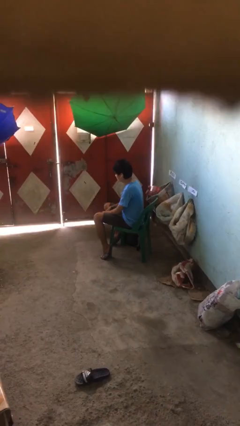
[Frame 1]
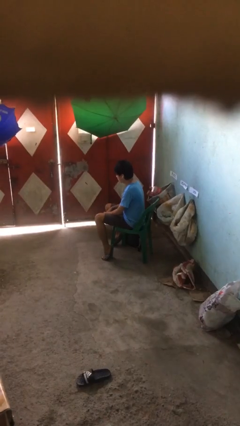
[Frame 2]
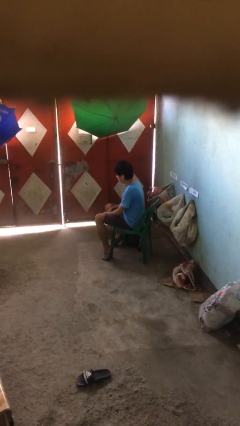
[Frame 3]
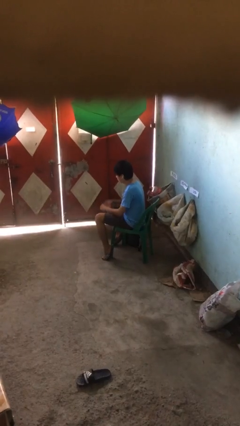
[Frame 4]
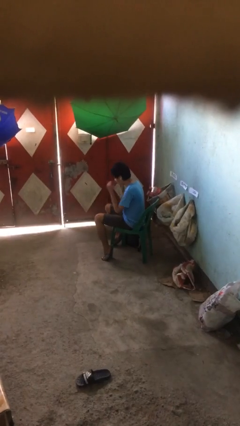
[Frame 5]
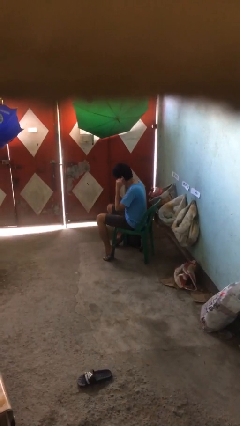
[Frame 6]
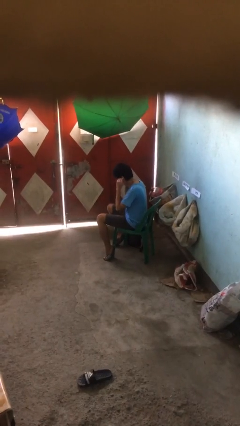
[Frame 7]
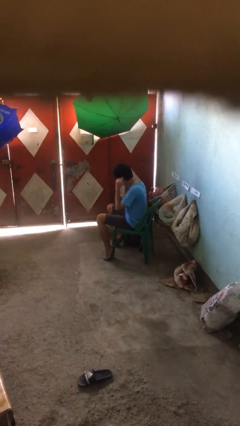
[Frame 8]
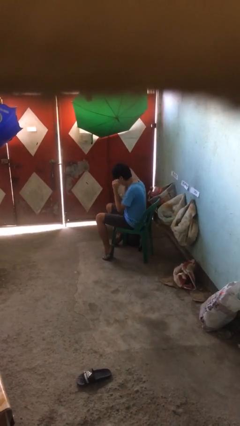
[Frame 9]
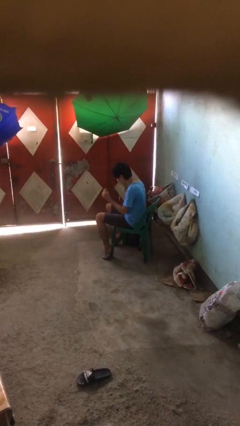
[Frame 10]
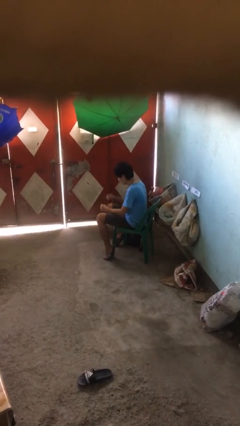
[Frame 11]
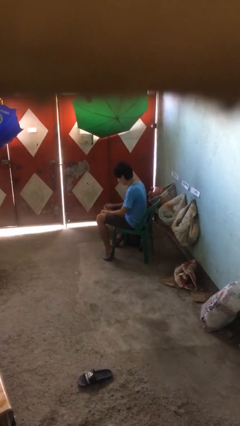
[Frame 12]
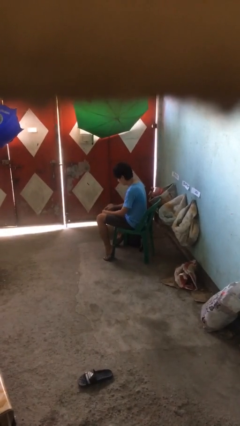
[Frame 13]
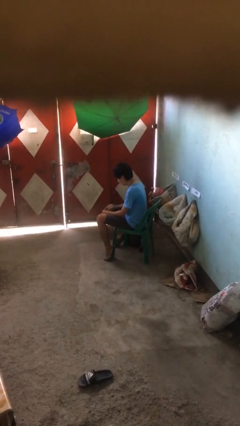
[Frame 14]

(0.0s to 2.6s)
person takes off headphones

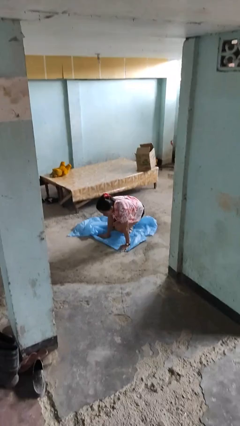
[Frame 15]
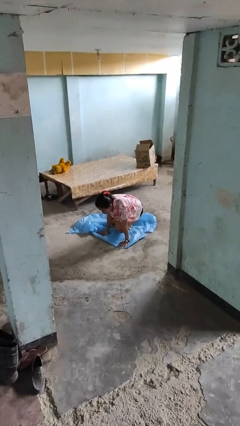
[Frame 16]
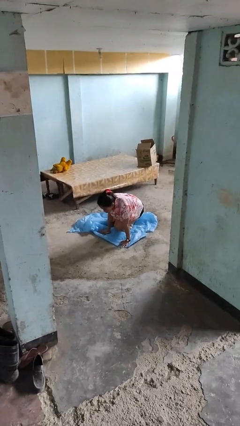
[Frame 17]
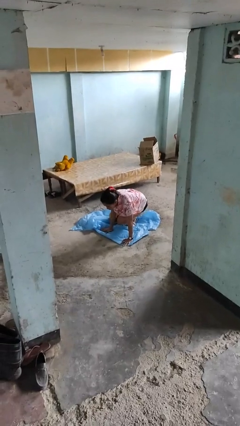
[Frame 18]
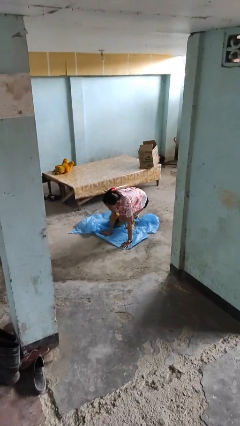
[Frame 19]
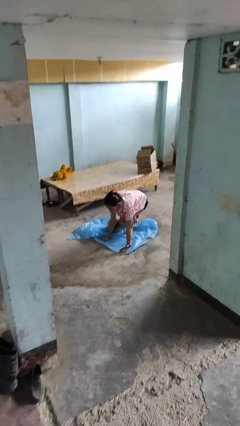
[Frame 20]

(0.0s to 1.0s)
person lies down on floor

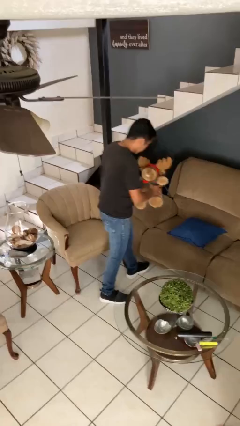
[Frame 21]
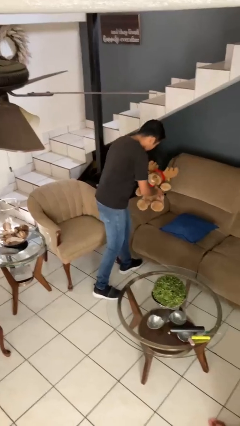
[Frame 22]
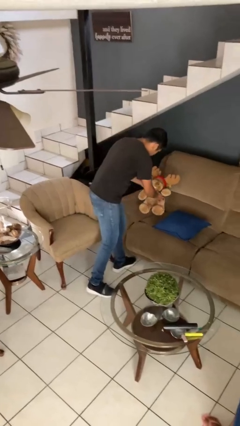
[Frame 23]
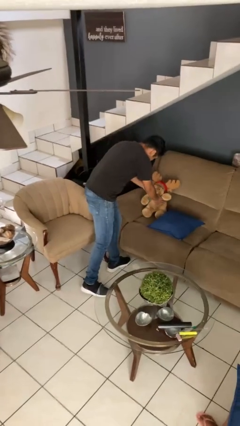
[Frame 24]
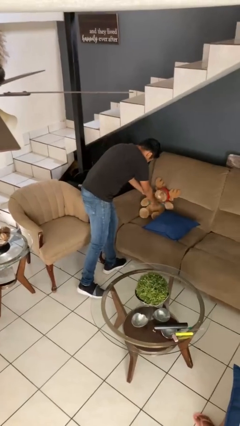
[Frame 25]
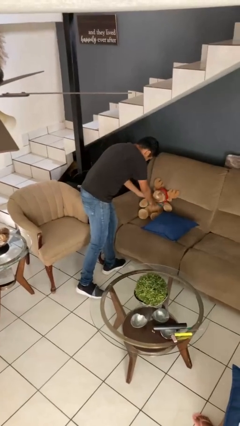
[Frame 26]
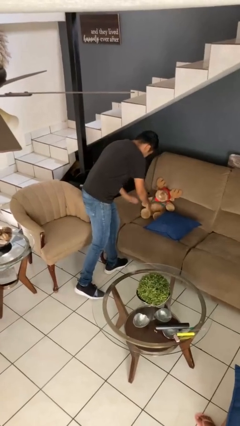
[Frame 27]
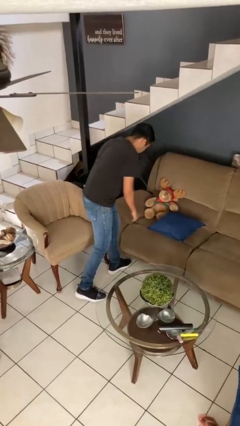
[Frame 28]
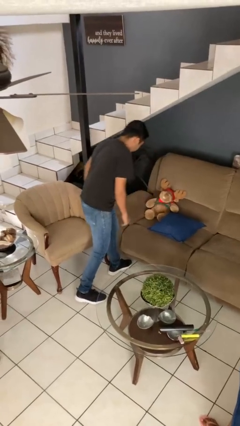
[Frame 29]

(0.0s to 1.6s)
person puts down object on couch

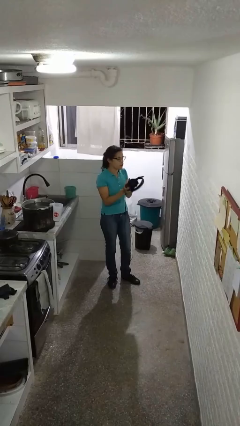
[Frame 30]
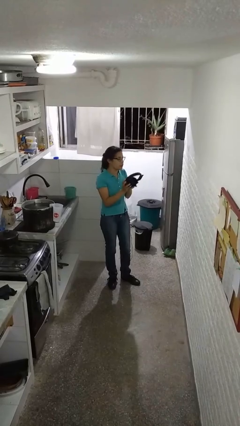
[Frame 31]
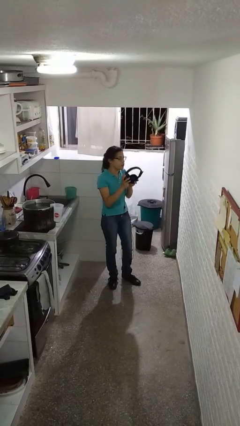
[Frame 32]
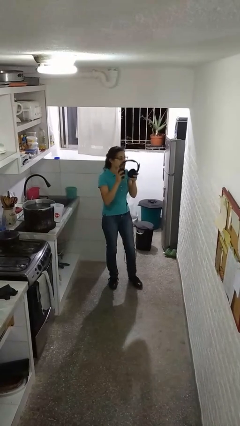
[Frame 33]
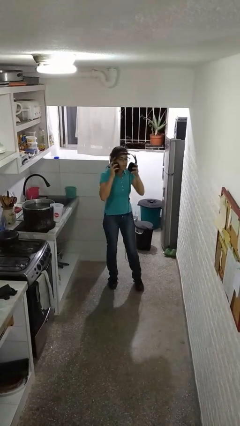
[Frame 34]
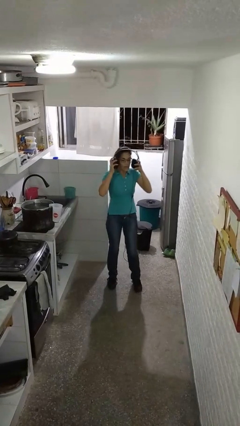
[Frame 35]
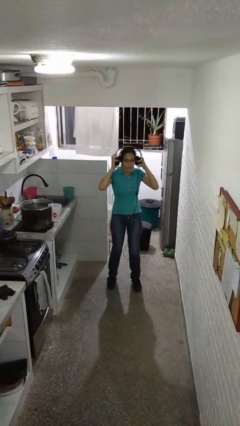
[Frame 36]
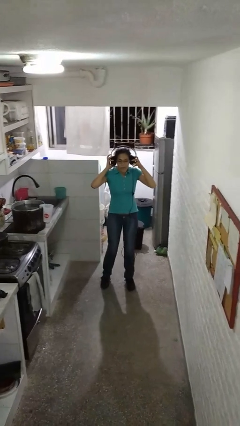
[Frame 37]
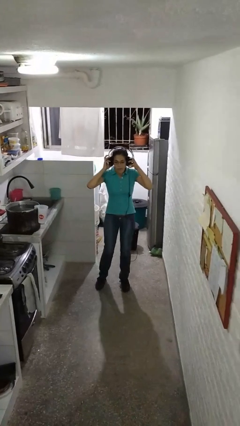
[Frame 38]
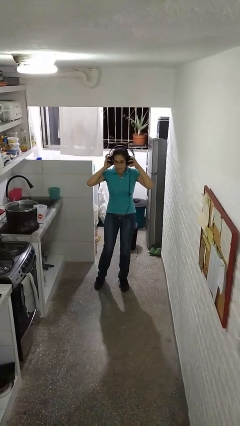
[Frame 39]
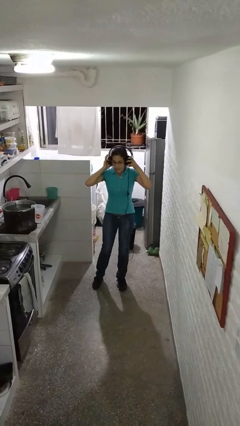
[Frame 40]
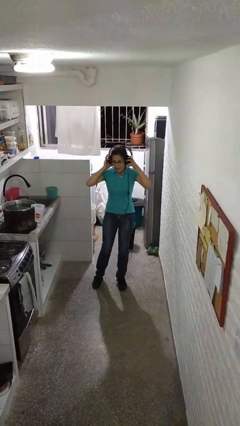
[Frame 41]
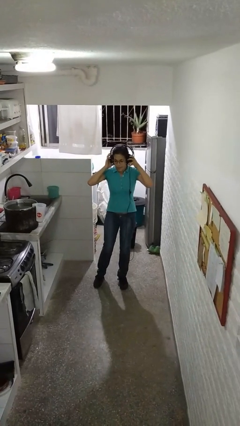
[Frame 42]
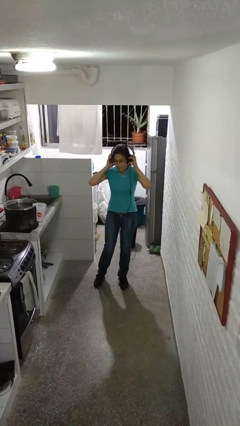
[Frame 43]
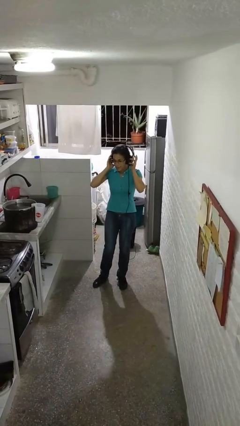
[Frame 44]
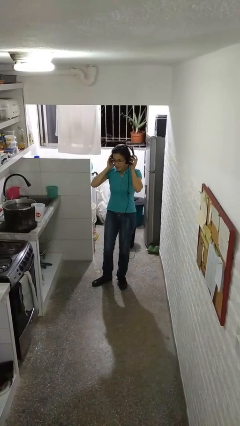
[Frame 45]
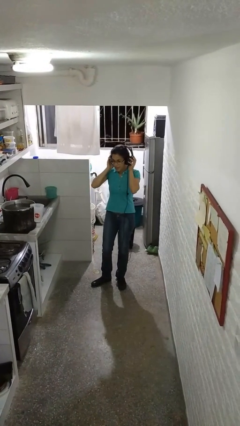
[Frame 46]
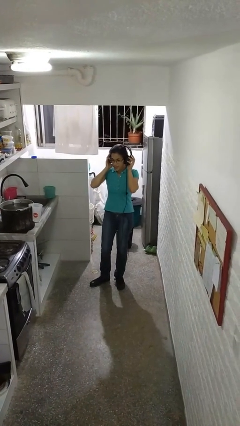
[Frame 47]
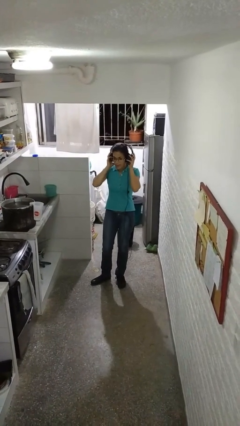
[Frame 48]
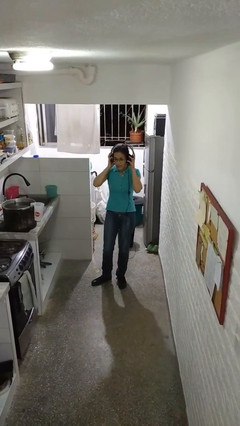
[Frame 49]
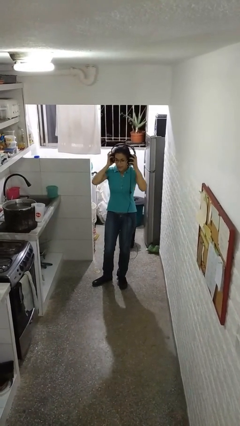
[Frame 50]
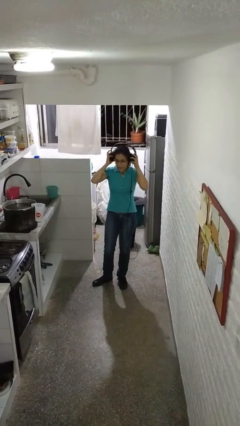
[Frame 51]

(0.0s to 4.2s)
person puts on headphones

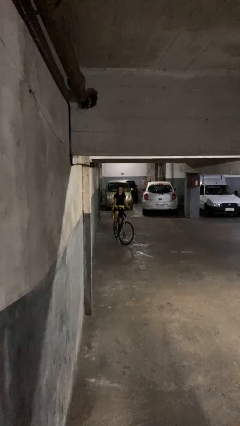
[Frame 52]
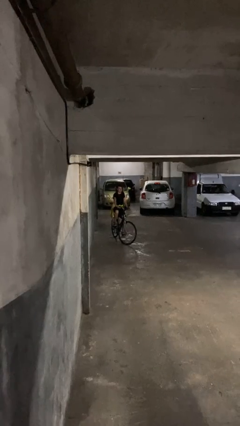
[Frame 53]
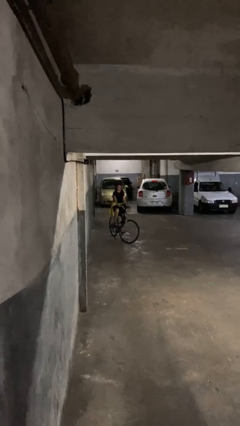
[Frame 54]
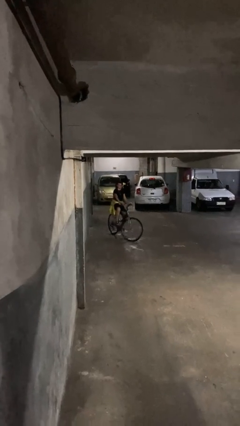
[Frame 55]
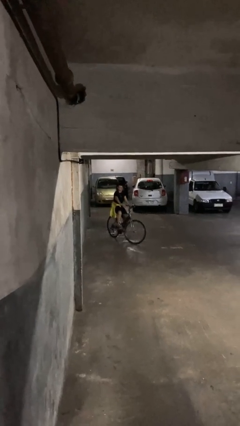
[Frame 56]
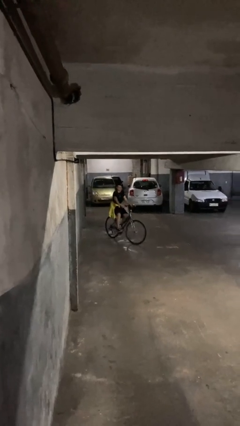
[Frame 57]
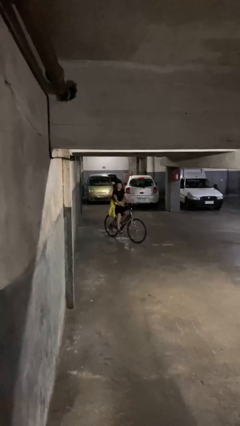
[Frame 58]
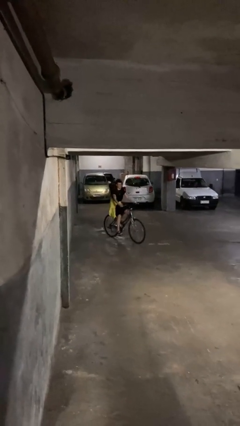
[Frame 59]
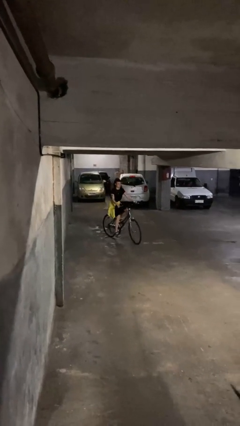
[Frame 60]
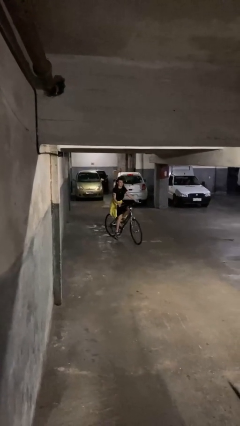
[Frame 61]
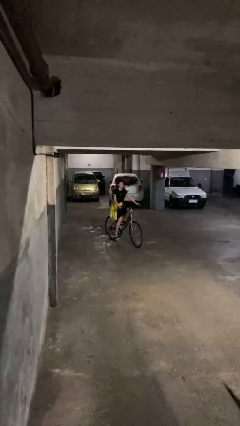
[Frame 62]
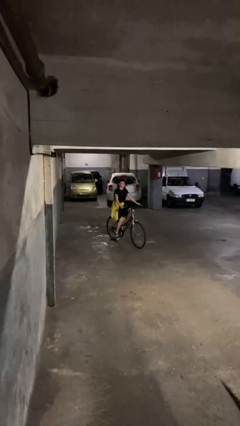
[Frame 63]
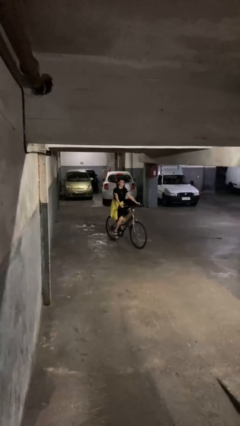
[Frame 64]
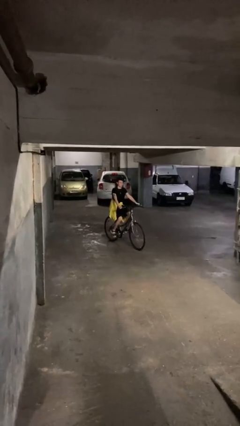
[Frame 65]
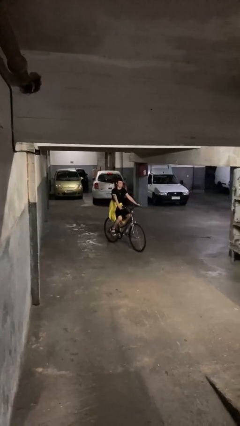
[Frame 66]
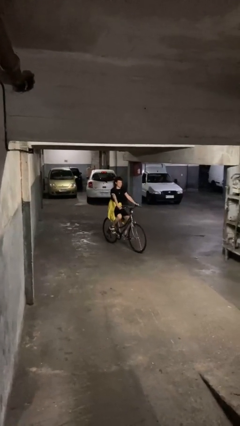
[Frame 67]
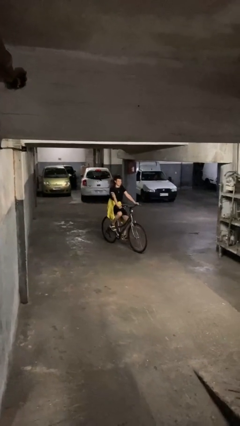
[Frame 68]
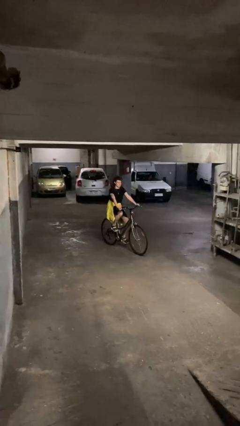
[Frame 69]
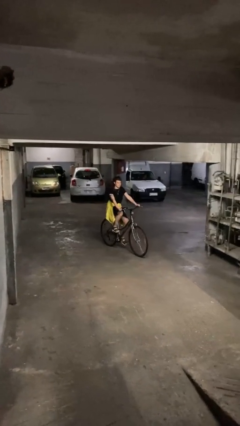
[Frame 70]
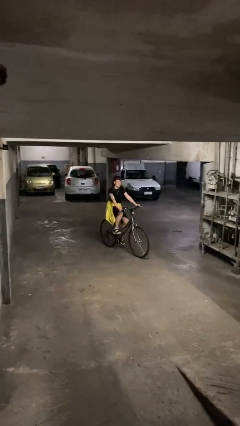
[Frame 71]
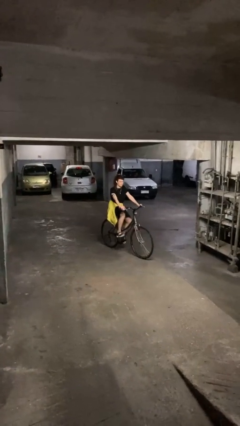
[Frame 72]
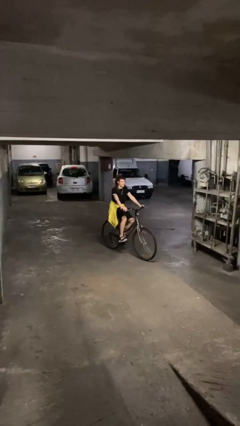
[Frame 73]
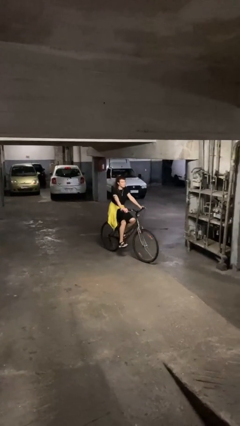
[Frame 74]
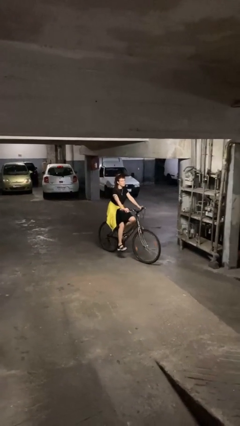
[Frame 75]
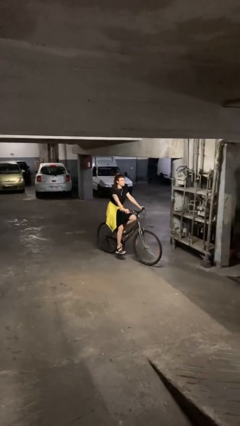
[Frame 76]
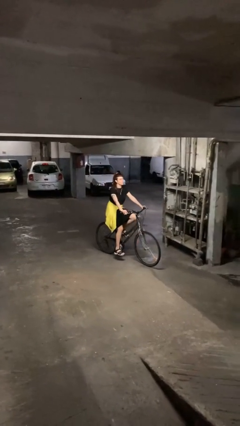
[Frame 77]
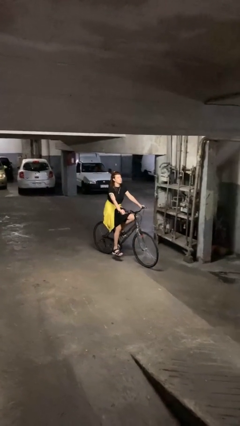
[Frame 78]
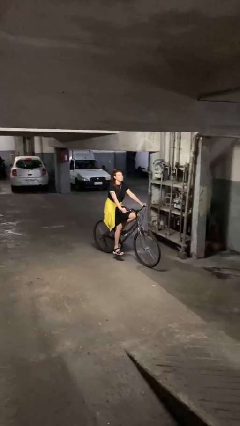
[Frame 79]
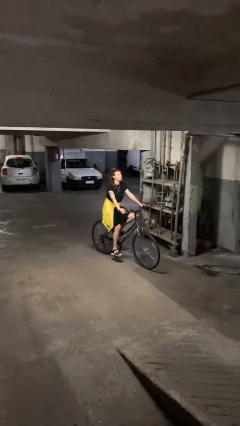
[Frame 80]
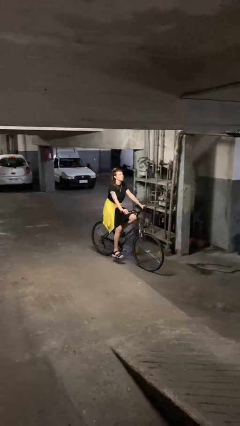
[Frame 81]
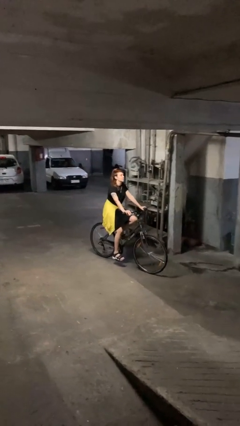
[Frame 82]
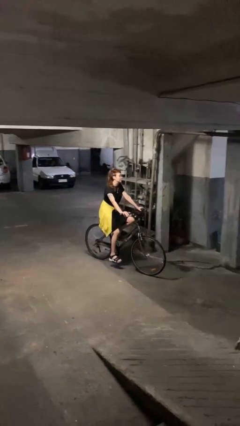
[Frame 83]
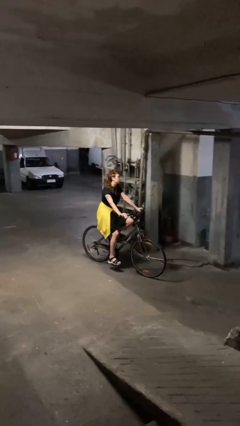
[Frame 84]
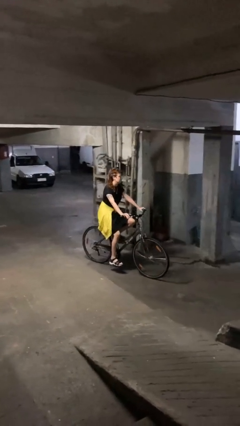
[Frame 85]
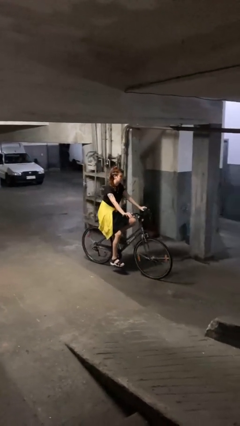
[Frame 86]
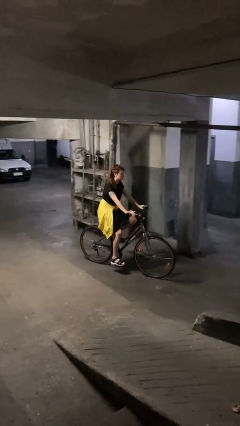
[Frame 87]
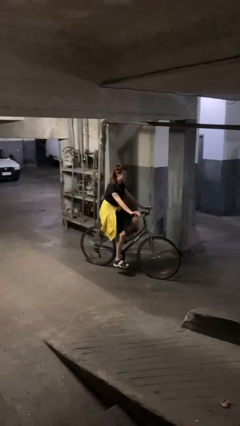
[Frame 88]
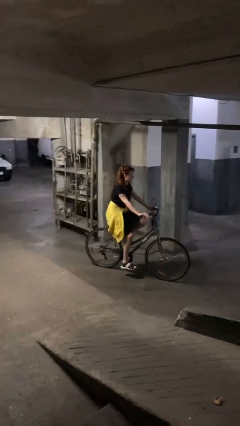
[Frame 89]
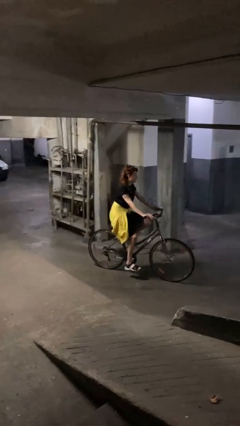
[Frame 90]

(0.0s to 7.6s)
person rides bicycle

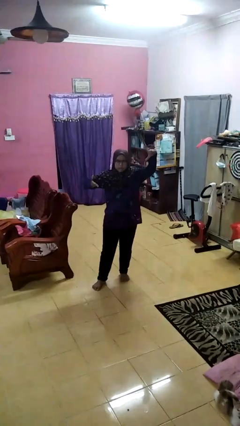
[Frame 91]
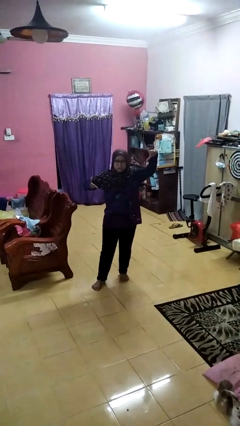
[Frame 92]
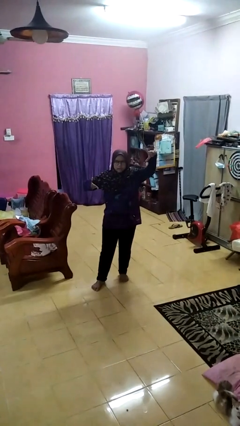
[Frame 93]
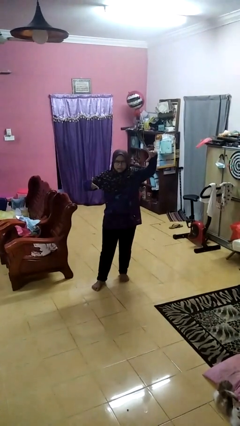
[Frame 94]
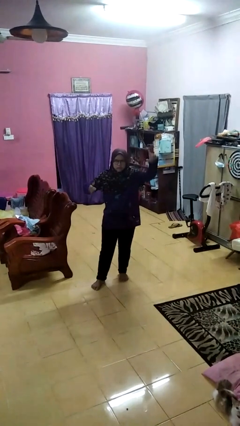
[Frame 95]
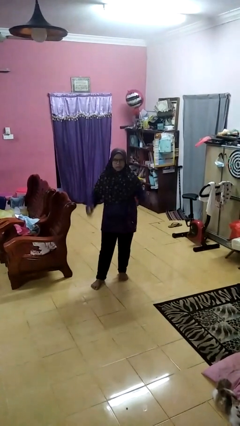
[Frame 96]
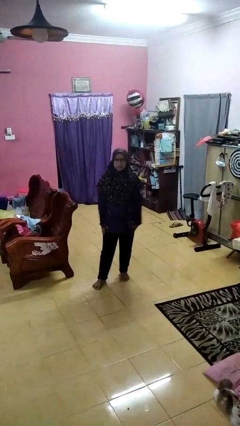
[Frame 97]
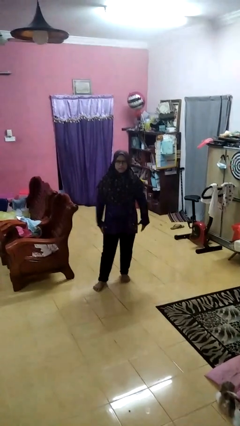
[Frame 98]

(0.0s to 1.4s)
person gestures zoom out
